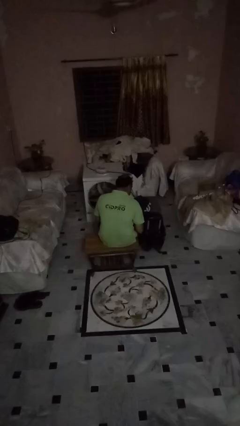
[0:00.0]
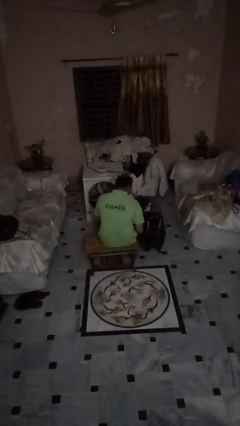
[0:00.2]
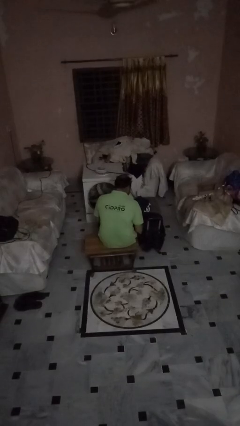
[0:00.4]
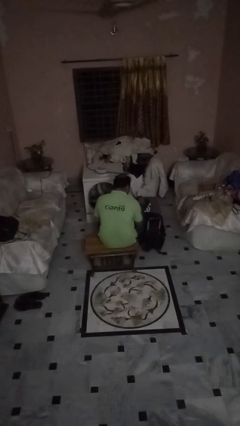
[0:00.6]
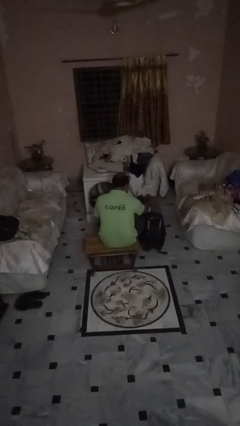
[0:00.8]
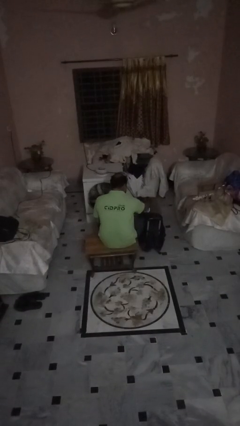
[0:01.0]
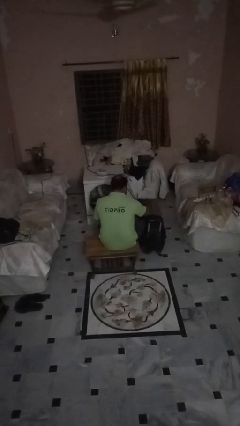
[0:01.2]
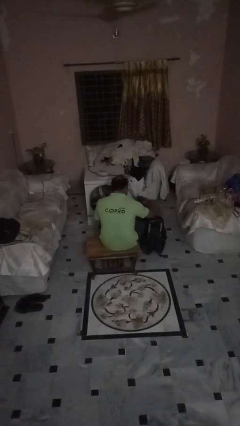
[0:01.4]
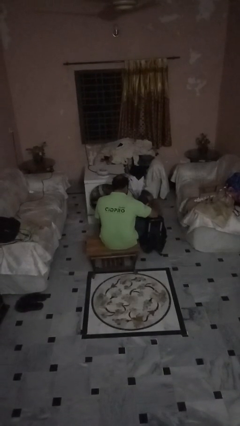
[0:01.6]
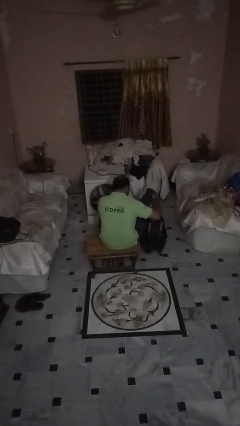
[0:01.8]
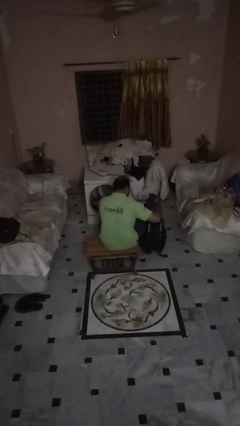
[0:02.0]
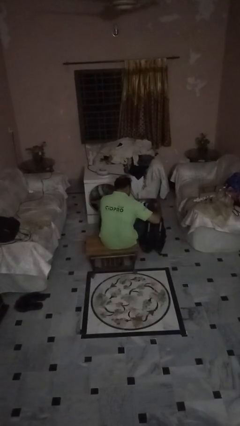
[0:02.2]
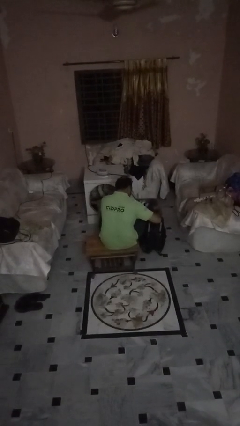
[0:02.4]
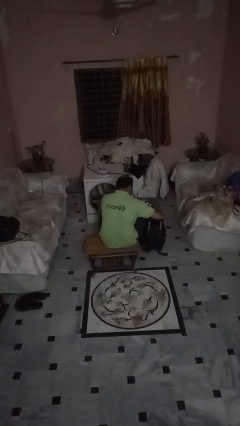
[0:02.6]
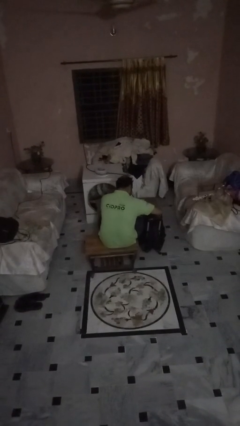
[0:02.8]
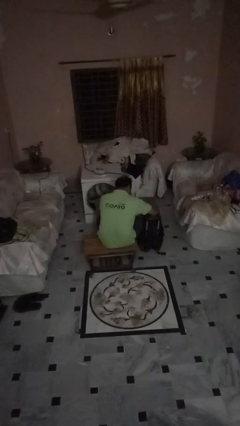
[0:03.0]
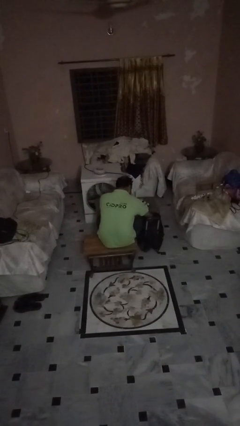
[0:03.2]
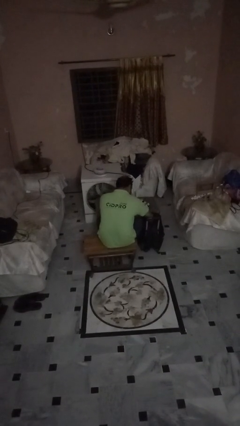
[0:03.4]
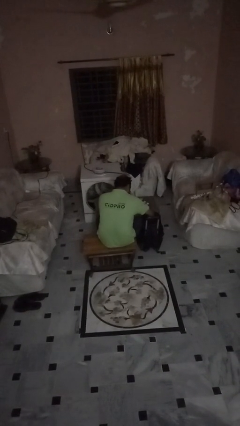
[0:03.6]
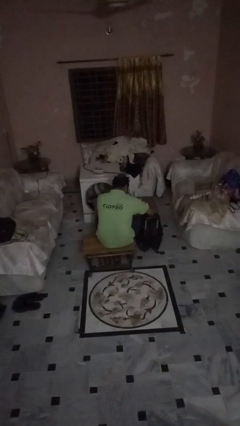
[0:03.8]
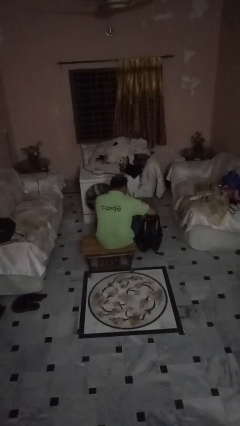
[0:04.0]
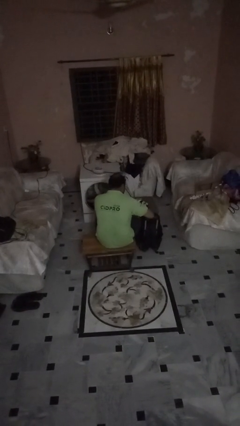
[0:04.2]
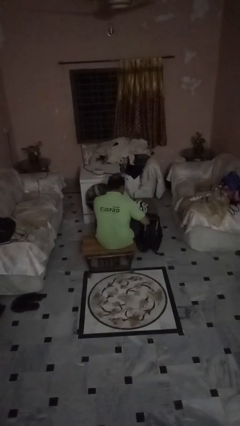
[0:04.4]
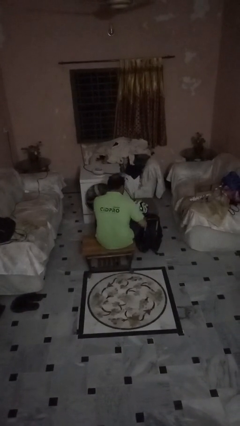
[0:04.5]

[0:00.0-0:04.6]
person loads clothes into suitcase

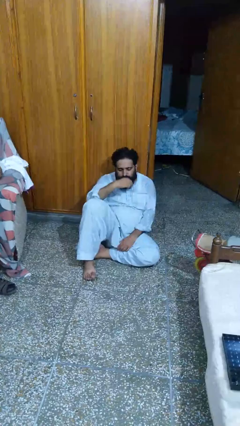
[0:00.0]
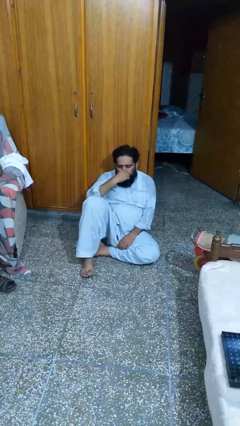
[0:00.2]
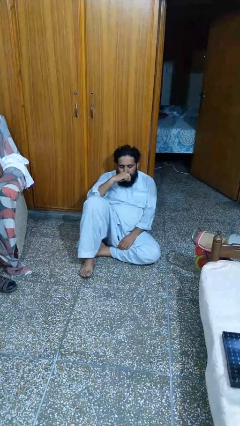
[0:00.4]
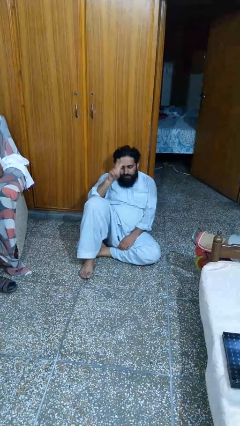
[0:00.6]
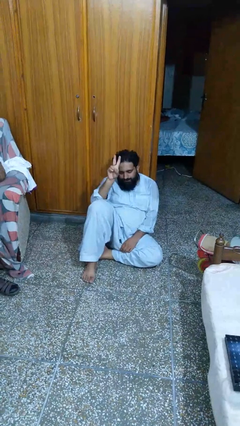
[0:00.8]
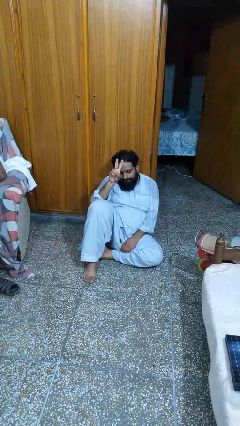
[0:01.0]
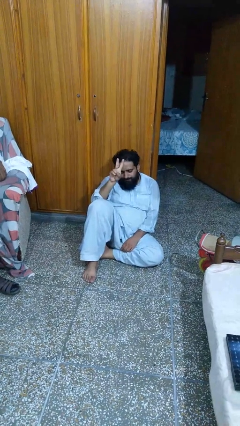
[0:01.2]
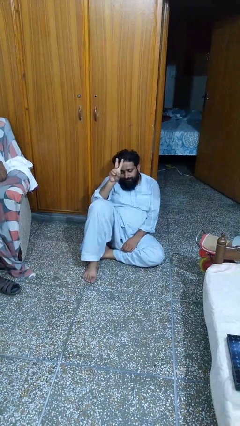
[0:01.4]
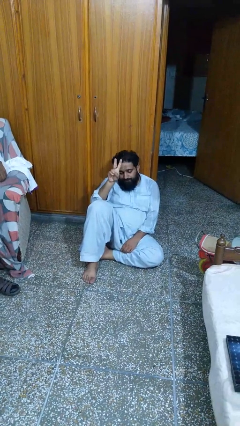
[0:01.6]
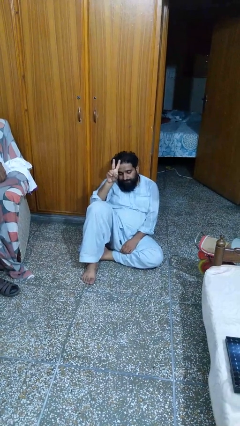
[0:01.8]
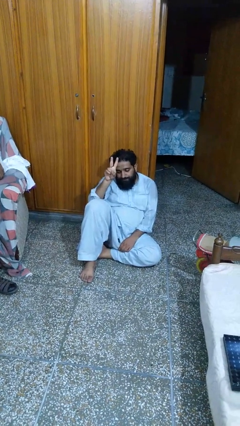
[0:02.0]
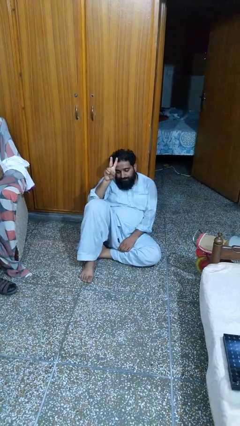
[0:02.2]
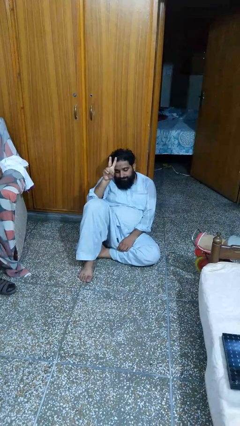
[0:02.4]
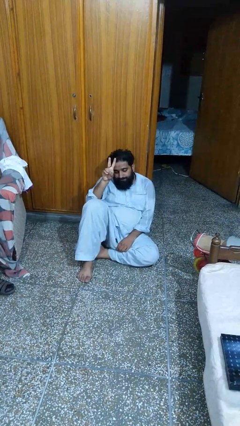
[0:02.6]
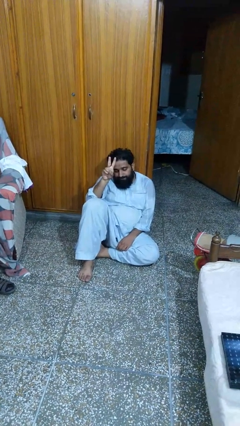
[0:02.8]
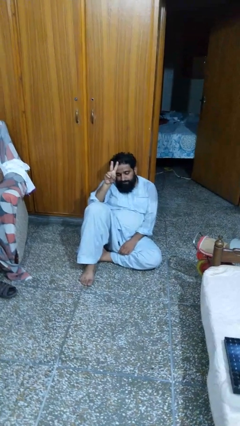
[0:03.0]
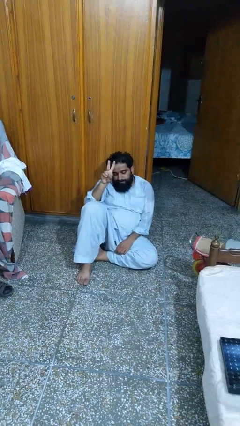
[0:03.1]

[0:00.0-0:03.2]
person gestures peace

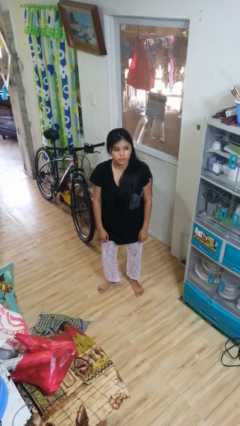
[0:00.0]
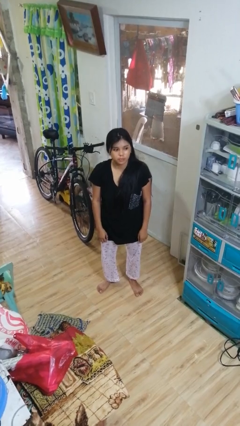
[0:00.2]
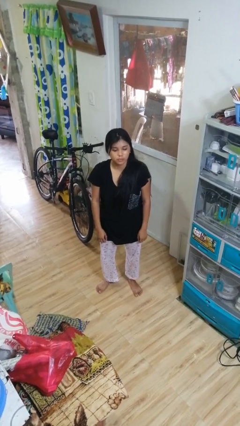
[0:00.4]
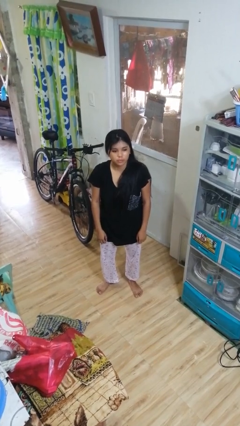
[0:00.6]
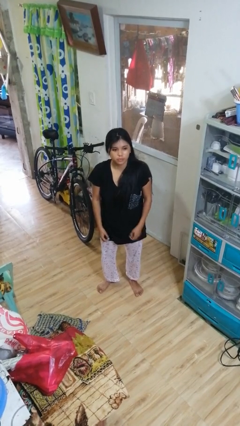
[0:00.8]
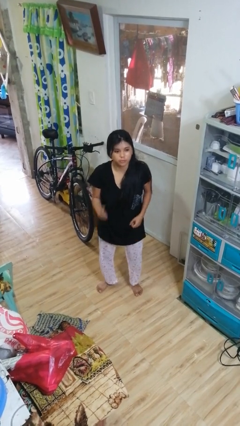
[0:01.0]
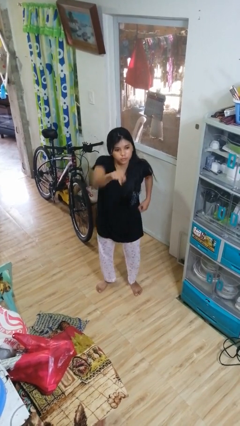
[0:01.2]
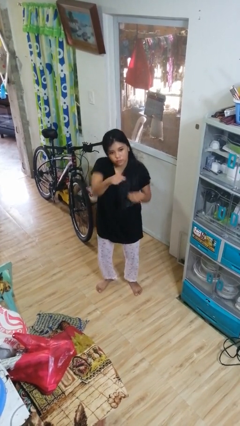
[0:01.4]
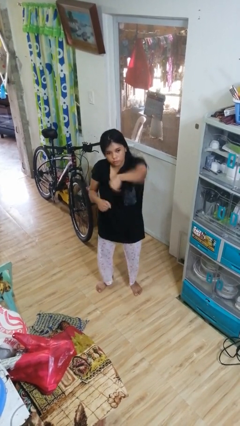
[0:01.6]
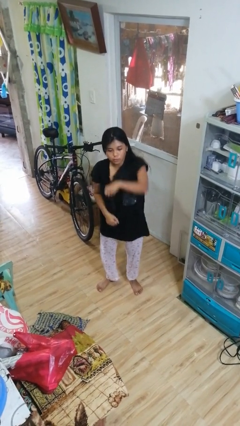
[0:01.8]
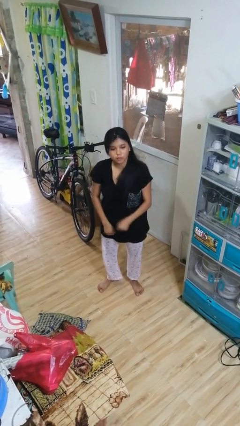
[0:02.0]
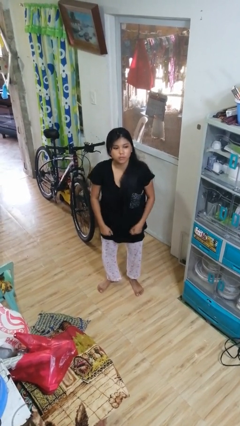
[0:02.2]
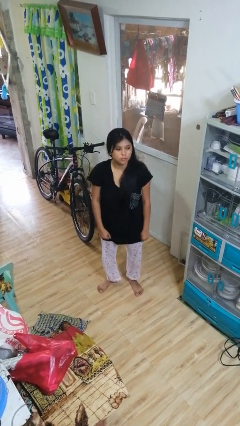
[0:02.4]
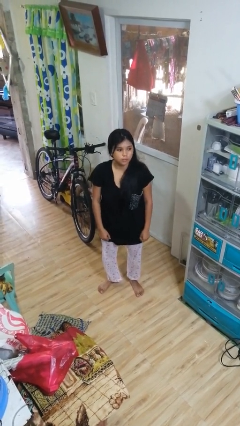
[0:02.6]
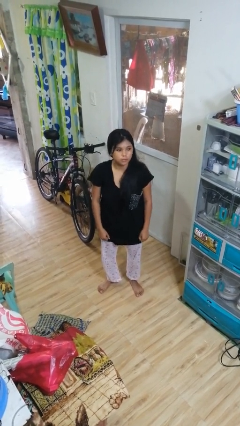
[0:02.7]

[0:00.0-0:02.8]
person punches

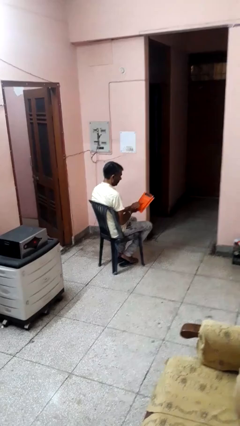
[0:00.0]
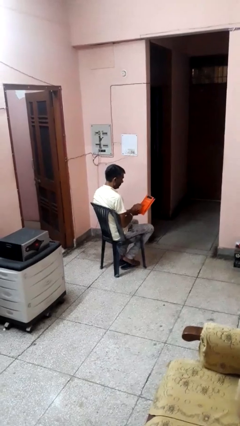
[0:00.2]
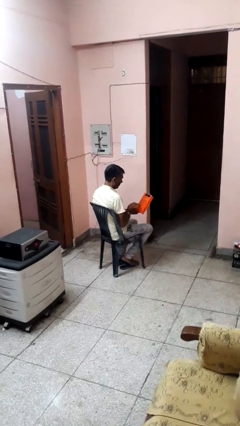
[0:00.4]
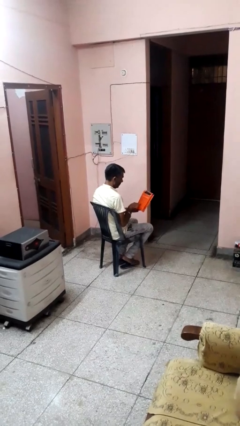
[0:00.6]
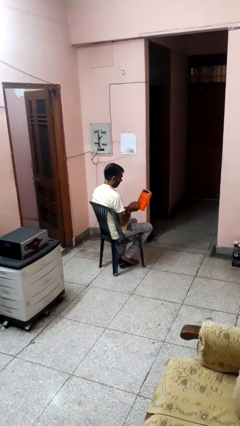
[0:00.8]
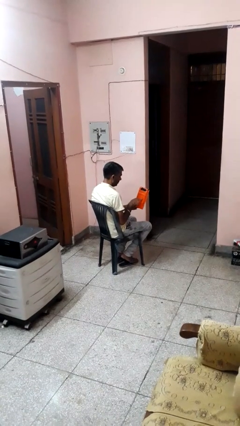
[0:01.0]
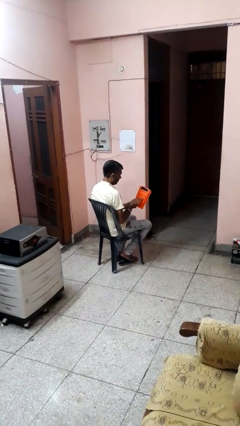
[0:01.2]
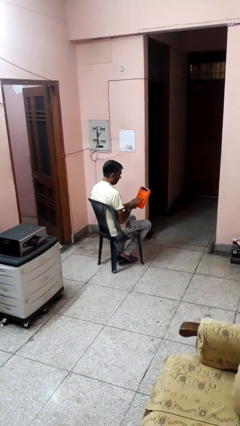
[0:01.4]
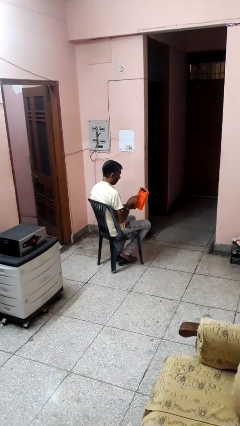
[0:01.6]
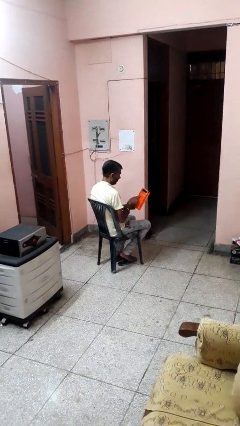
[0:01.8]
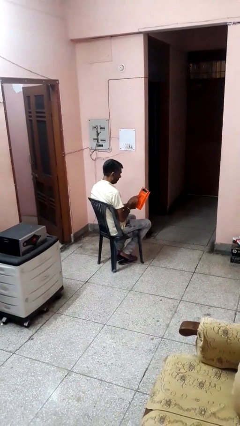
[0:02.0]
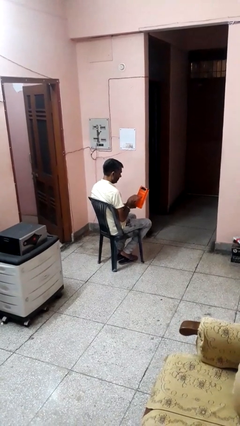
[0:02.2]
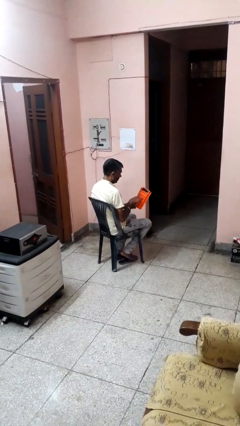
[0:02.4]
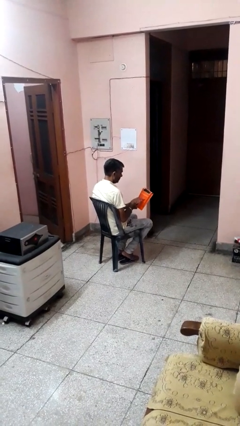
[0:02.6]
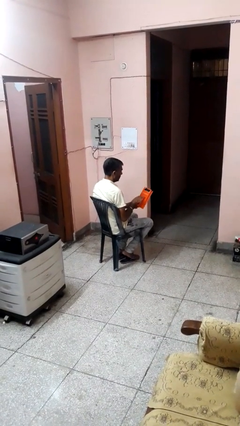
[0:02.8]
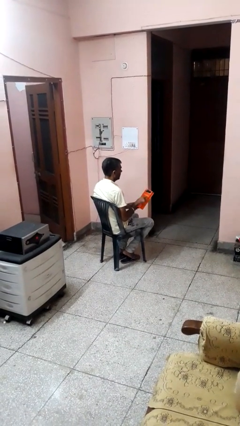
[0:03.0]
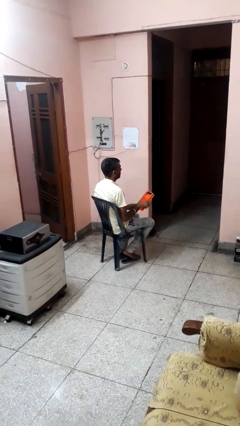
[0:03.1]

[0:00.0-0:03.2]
person taps object with finger

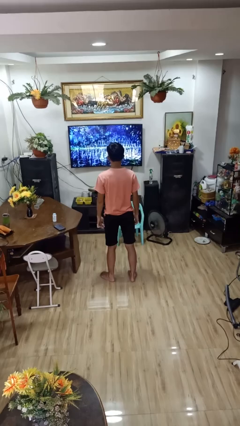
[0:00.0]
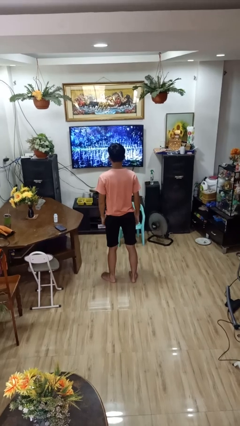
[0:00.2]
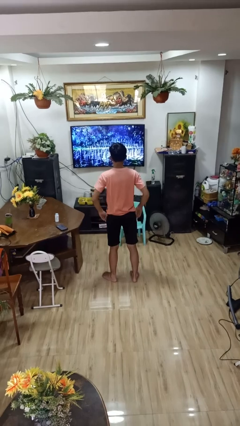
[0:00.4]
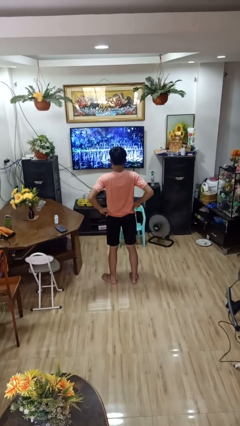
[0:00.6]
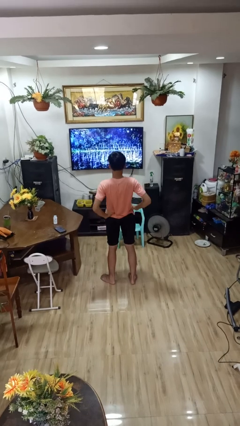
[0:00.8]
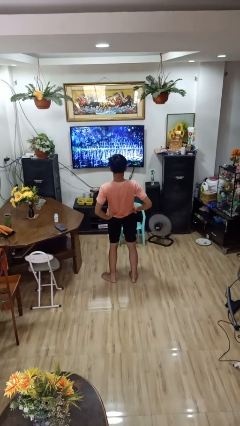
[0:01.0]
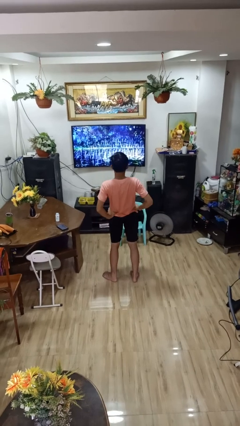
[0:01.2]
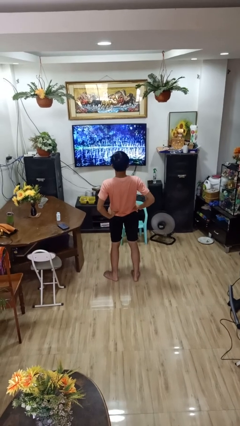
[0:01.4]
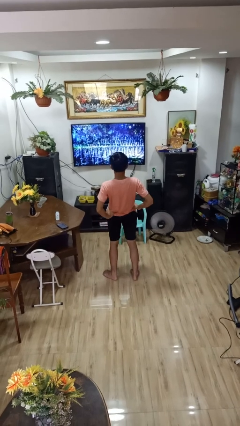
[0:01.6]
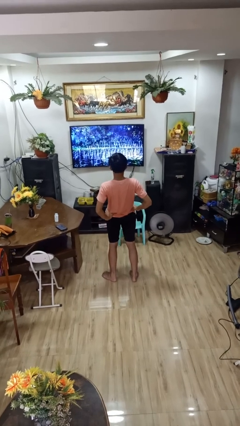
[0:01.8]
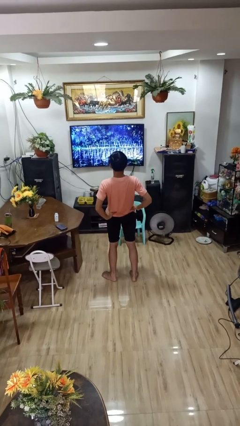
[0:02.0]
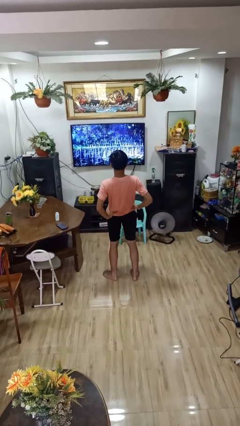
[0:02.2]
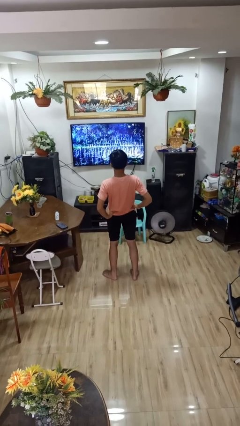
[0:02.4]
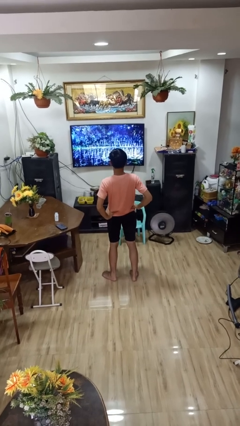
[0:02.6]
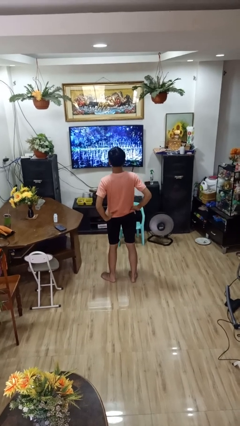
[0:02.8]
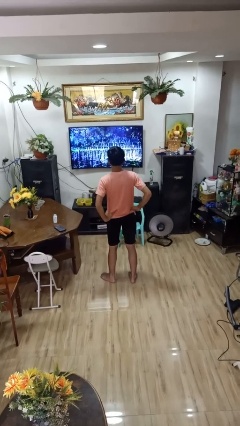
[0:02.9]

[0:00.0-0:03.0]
person stretches back

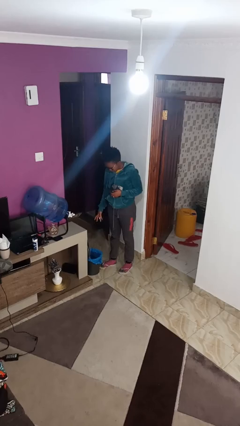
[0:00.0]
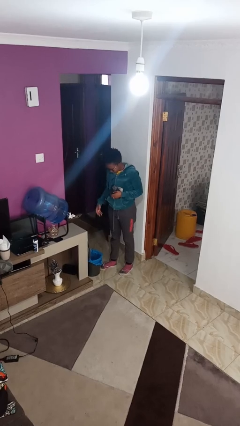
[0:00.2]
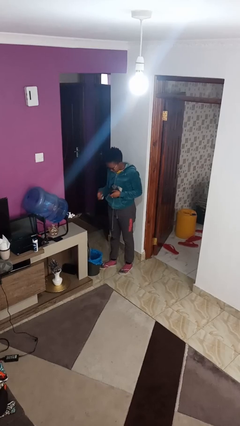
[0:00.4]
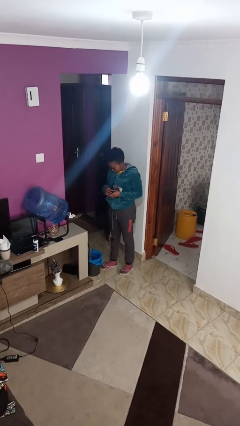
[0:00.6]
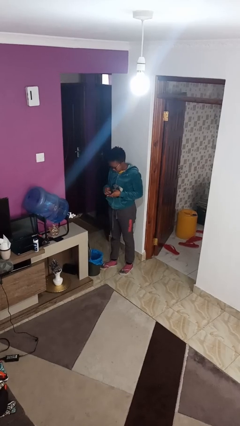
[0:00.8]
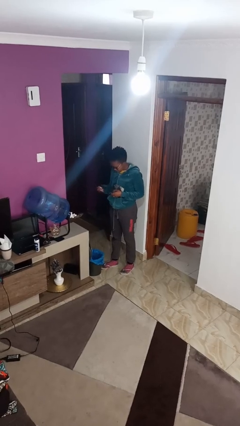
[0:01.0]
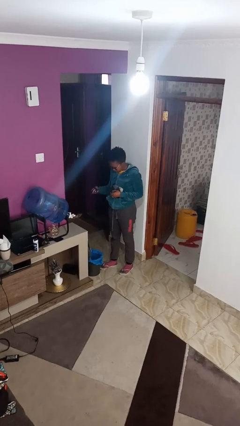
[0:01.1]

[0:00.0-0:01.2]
person discards trash
